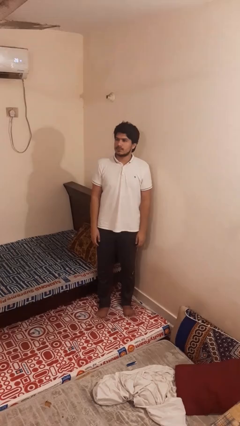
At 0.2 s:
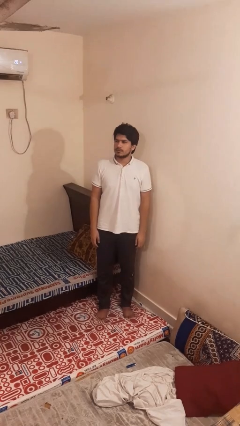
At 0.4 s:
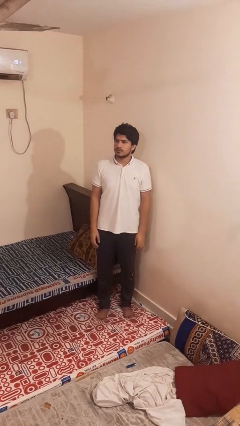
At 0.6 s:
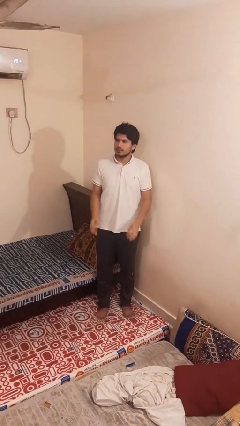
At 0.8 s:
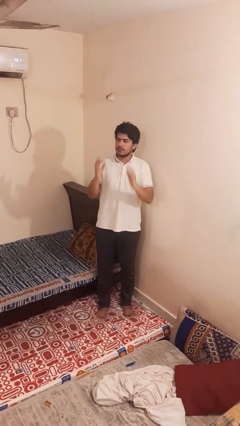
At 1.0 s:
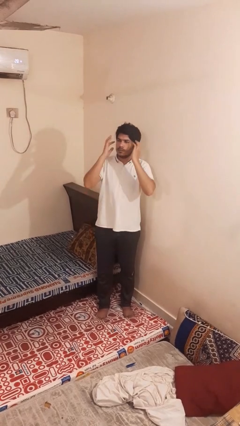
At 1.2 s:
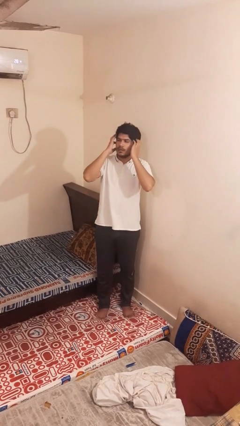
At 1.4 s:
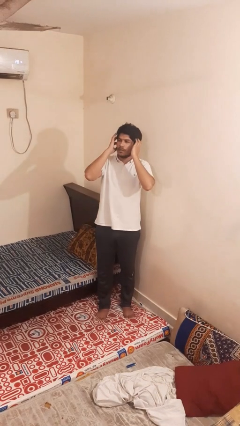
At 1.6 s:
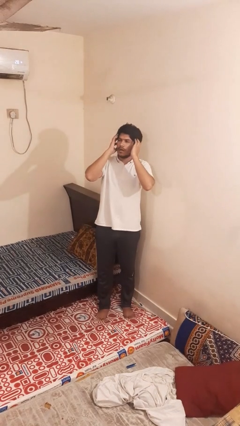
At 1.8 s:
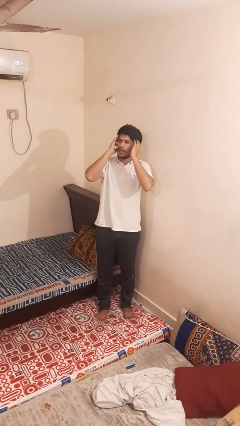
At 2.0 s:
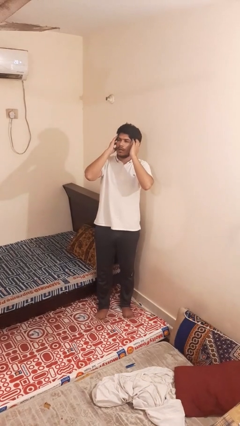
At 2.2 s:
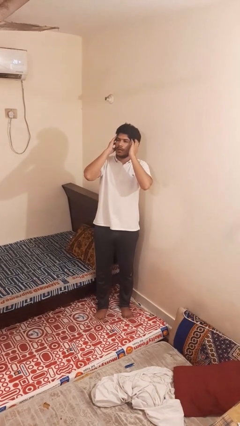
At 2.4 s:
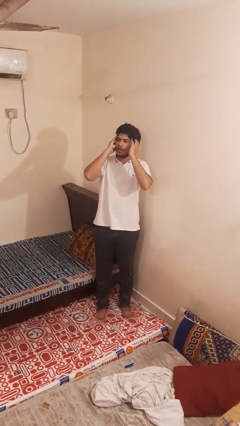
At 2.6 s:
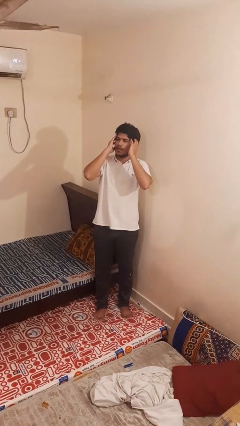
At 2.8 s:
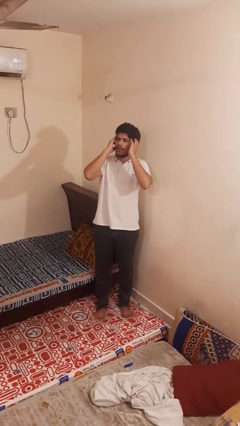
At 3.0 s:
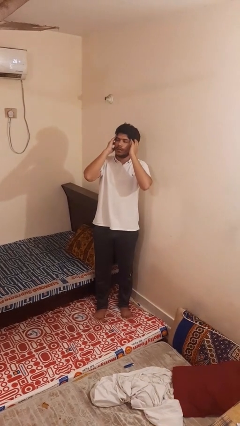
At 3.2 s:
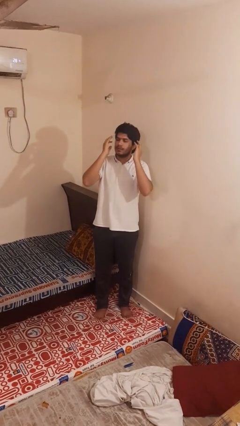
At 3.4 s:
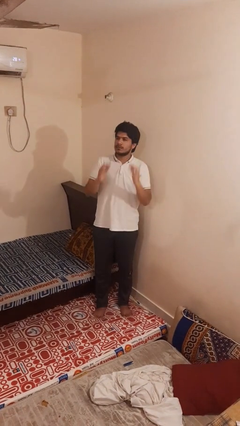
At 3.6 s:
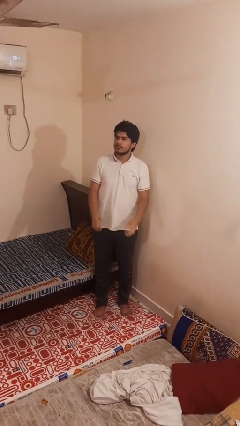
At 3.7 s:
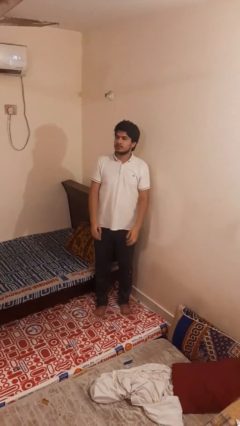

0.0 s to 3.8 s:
person puts fingers in ear

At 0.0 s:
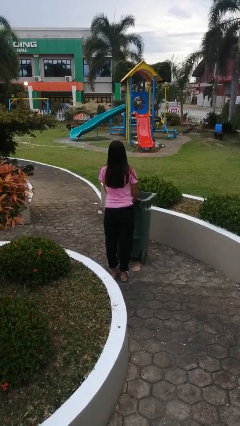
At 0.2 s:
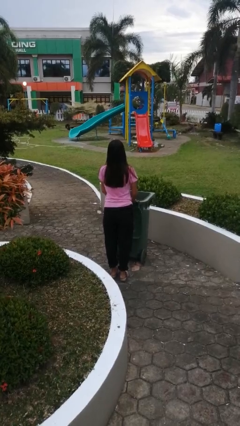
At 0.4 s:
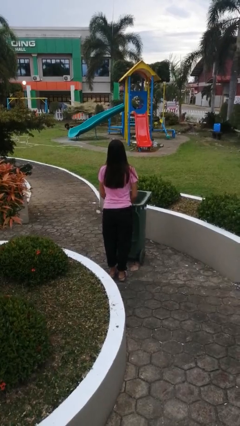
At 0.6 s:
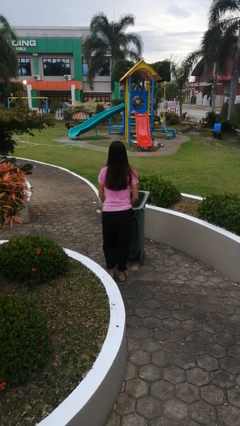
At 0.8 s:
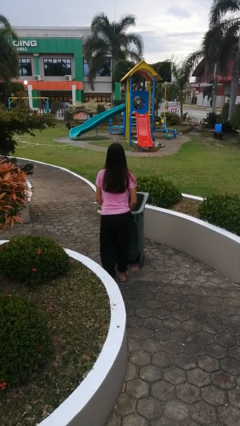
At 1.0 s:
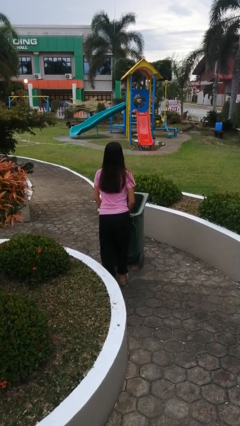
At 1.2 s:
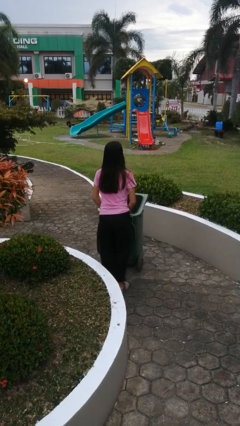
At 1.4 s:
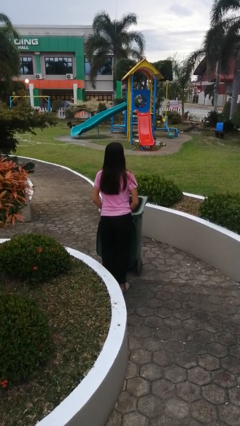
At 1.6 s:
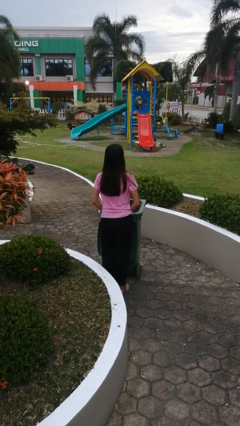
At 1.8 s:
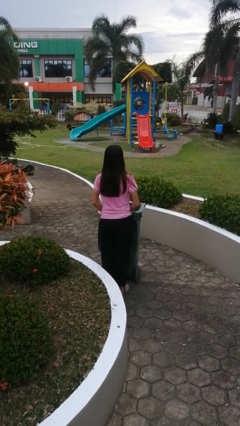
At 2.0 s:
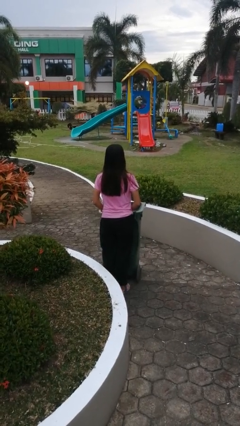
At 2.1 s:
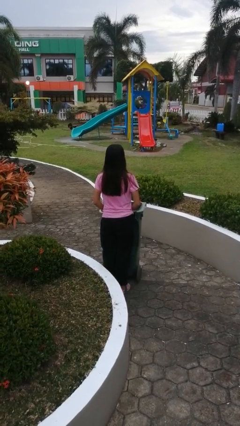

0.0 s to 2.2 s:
person pulls wheeled trashcan

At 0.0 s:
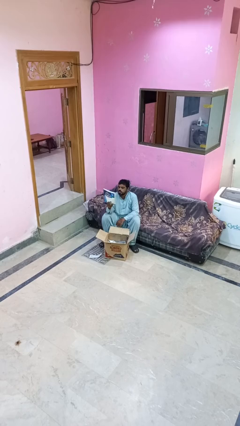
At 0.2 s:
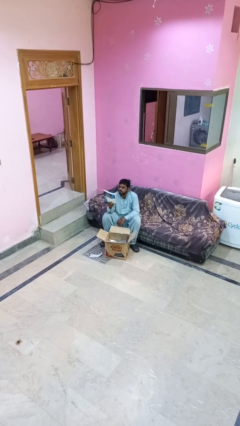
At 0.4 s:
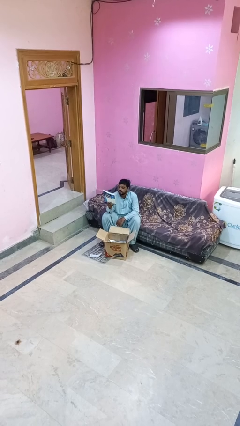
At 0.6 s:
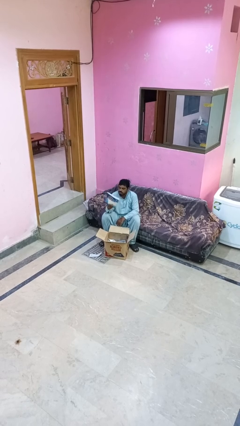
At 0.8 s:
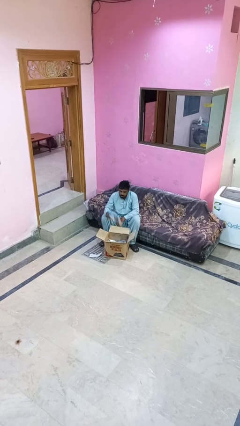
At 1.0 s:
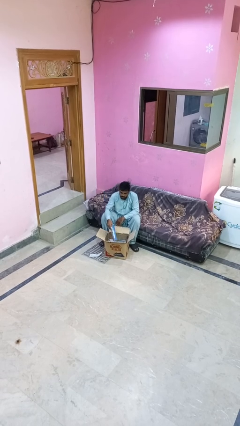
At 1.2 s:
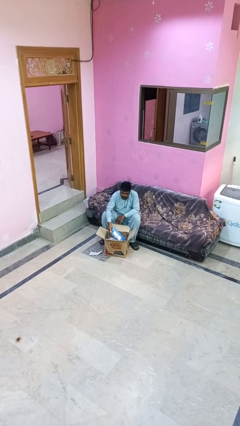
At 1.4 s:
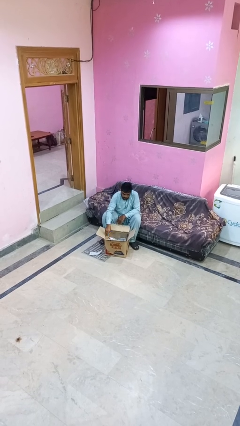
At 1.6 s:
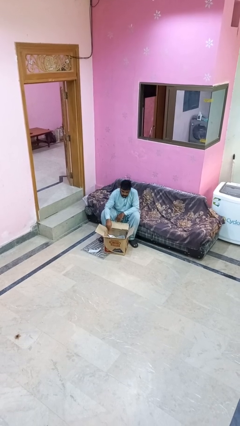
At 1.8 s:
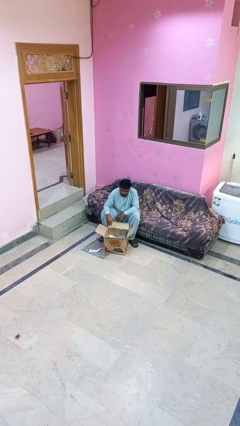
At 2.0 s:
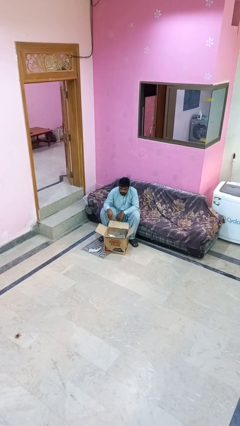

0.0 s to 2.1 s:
person puts object into box

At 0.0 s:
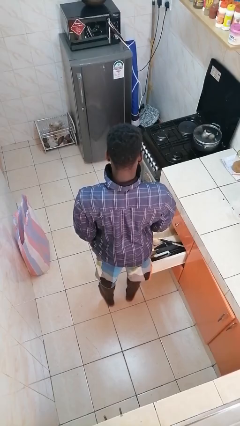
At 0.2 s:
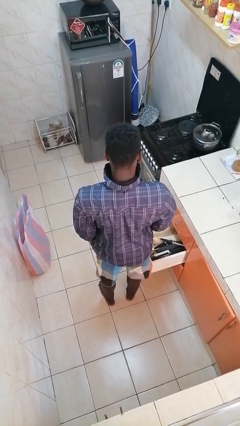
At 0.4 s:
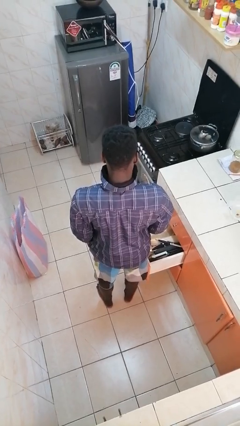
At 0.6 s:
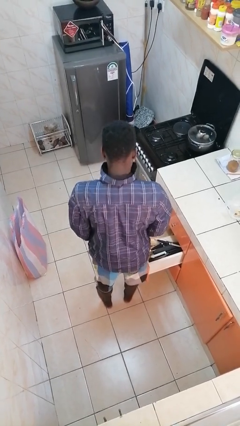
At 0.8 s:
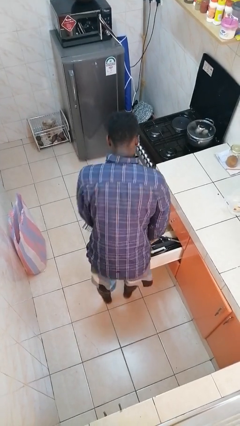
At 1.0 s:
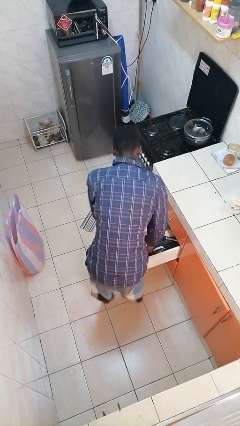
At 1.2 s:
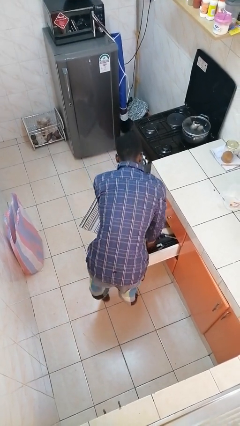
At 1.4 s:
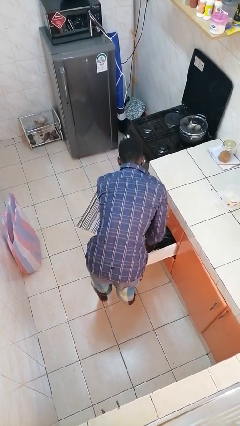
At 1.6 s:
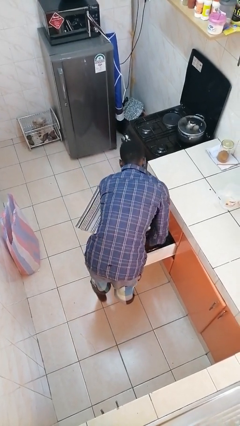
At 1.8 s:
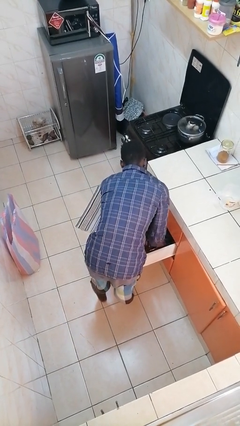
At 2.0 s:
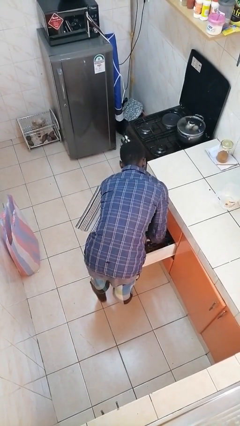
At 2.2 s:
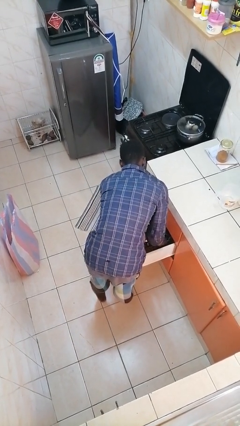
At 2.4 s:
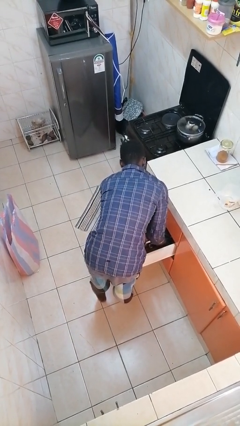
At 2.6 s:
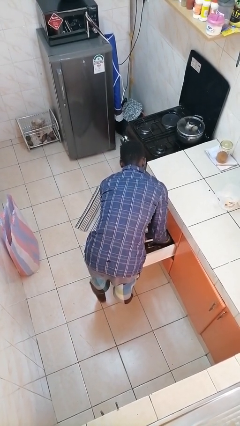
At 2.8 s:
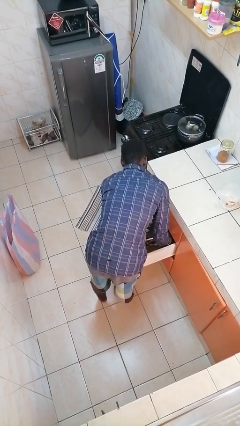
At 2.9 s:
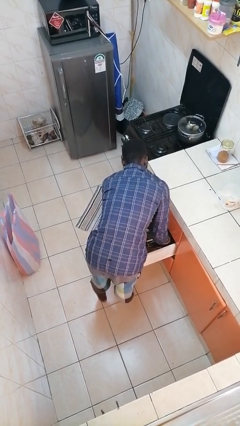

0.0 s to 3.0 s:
person searches in kitchen drawer

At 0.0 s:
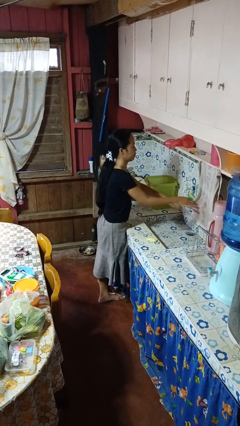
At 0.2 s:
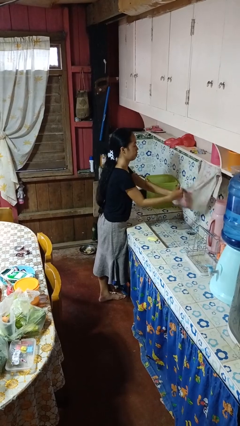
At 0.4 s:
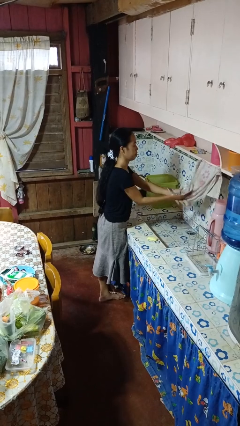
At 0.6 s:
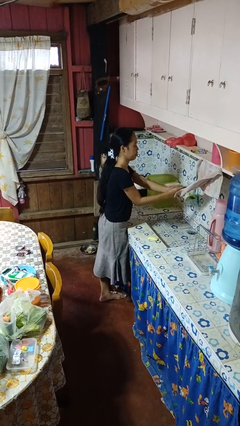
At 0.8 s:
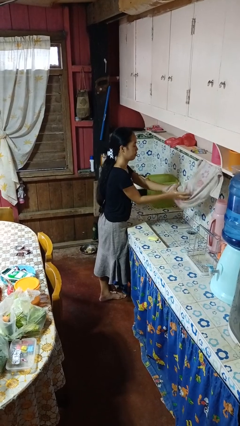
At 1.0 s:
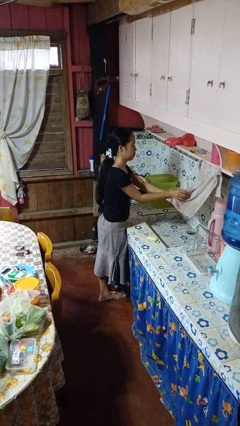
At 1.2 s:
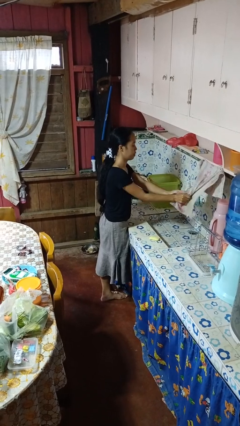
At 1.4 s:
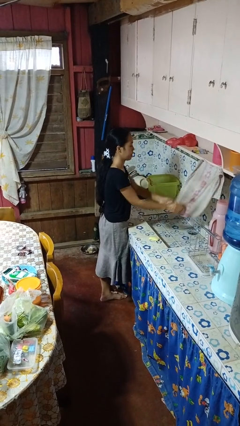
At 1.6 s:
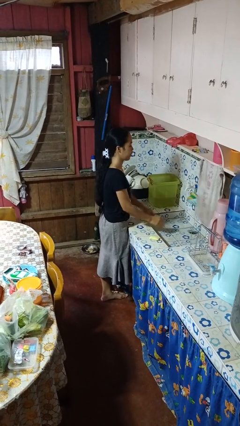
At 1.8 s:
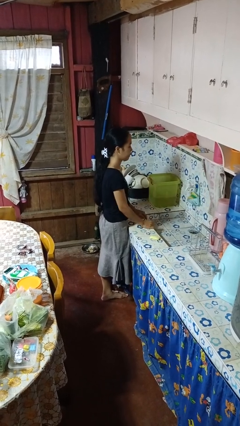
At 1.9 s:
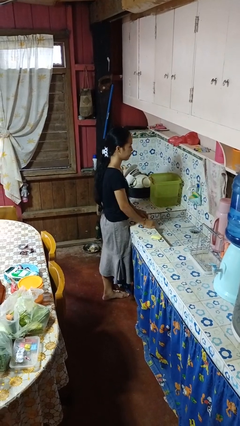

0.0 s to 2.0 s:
person dries hands with towel

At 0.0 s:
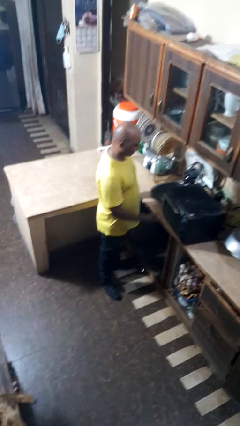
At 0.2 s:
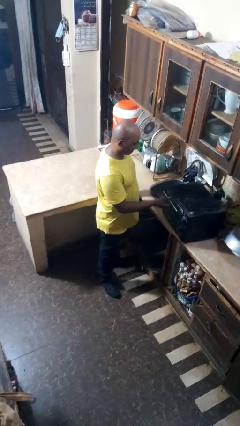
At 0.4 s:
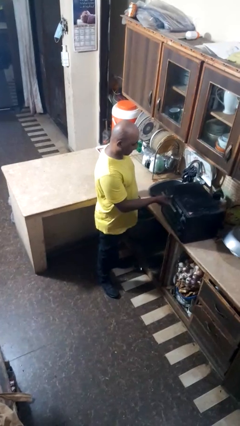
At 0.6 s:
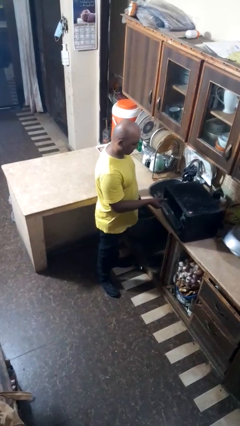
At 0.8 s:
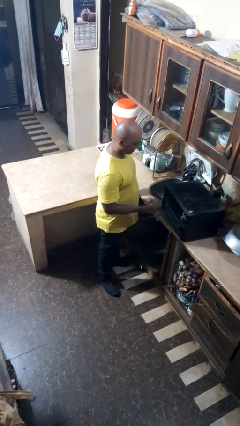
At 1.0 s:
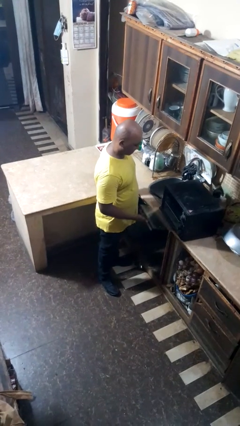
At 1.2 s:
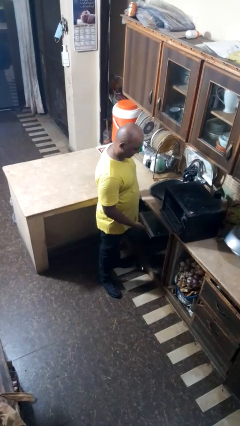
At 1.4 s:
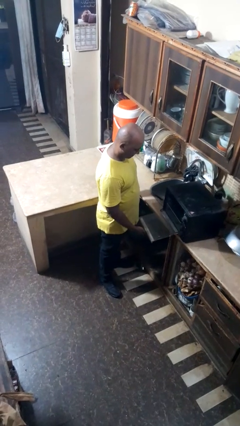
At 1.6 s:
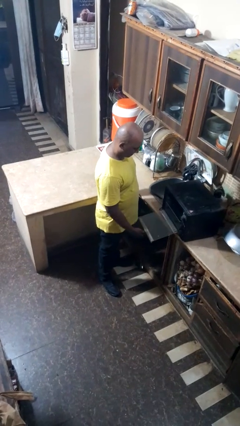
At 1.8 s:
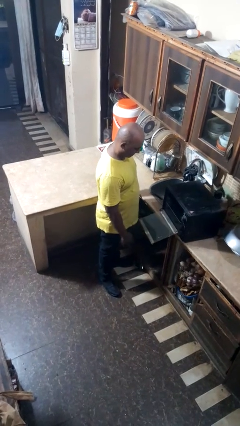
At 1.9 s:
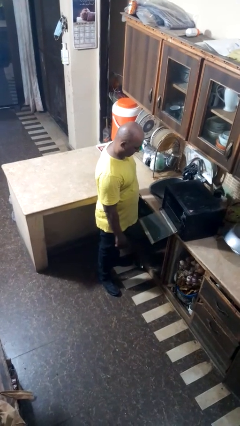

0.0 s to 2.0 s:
person opens oven door

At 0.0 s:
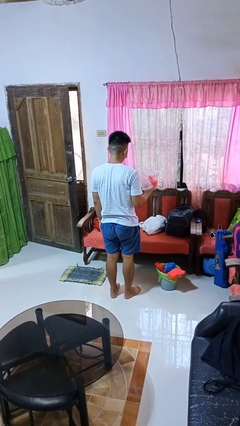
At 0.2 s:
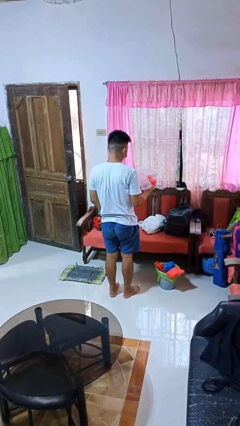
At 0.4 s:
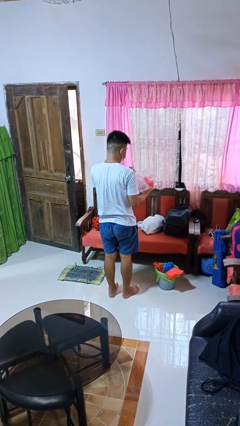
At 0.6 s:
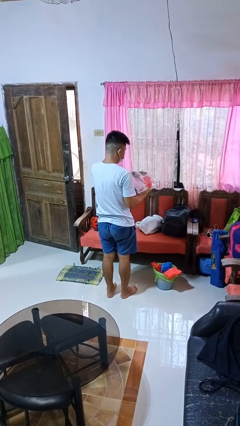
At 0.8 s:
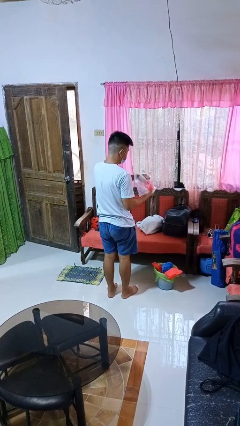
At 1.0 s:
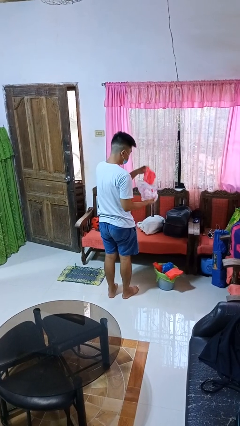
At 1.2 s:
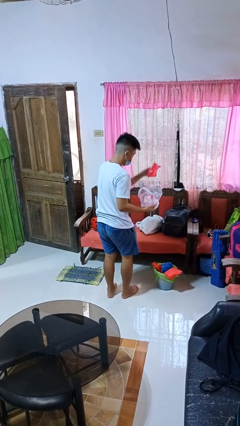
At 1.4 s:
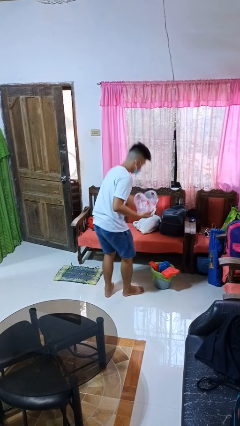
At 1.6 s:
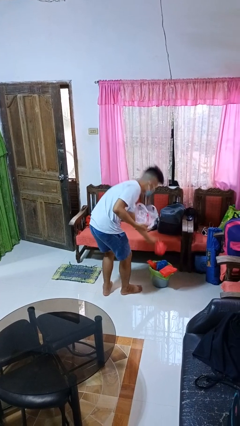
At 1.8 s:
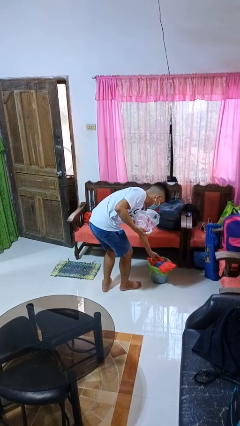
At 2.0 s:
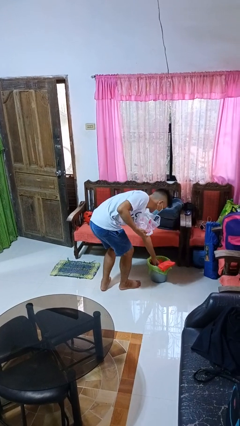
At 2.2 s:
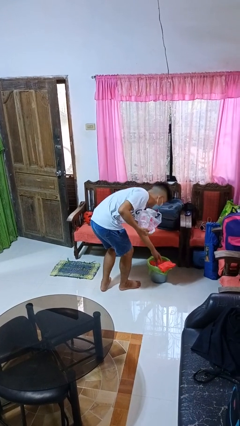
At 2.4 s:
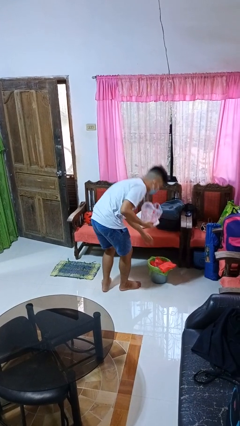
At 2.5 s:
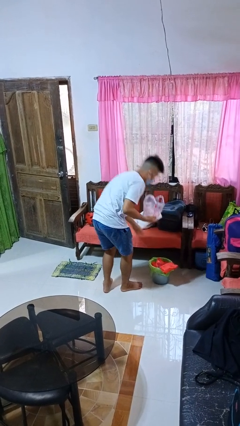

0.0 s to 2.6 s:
person discards trash
